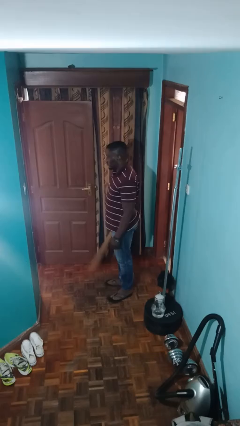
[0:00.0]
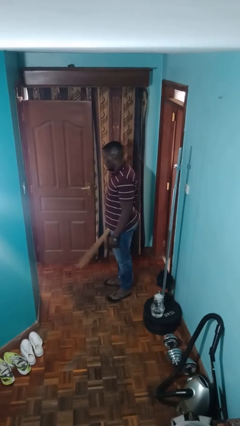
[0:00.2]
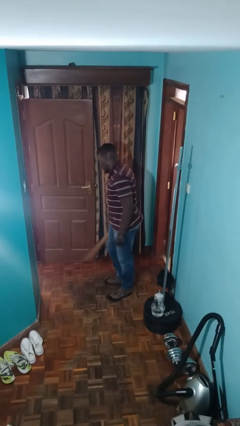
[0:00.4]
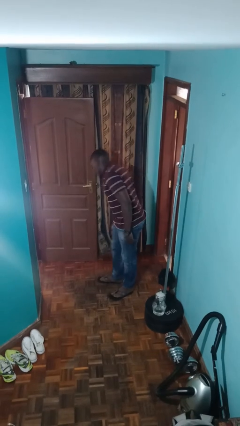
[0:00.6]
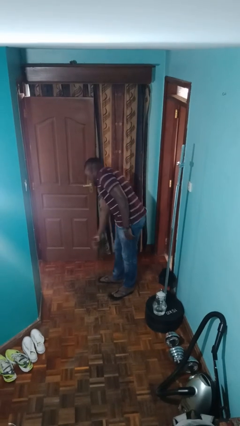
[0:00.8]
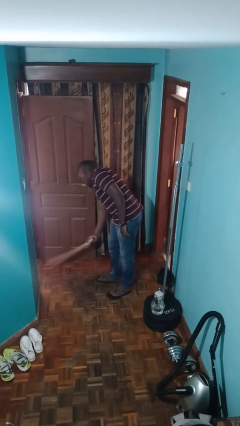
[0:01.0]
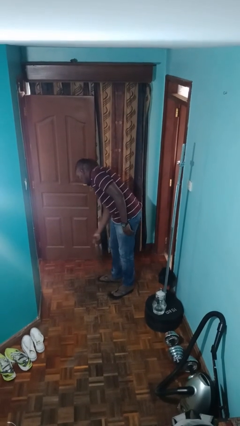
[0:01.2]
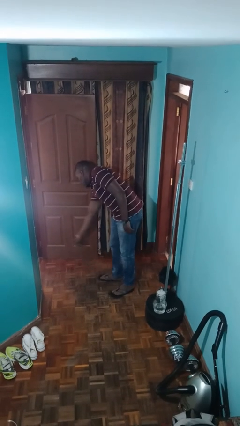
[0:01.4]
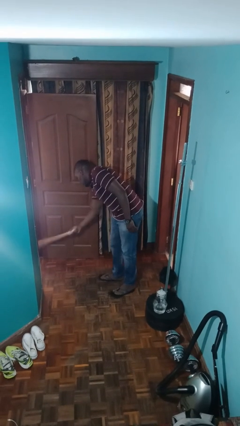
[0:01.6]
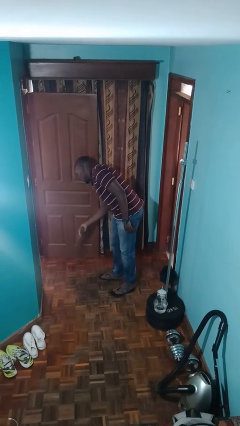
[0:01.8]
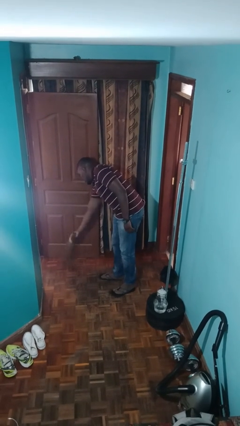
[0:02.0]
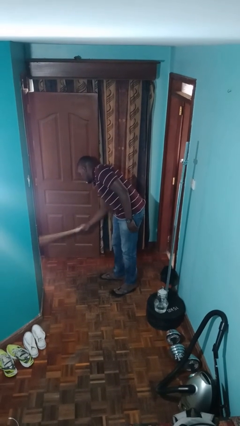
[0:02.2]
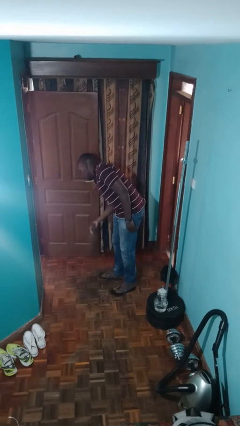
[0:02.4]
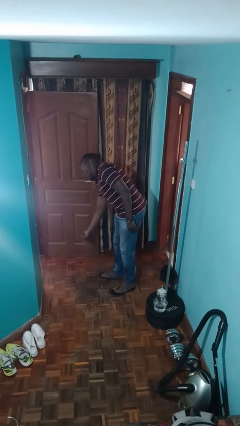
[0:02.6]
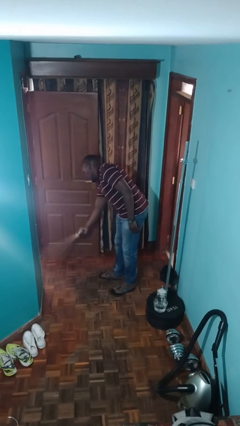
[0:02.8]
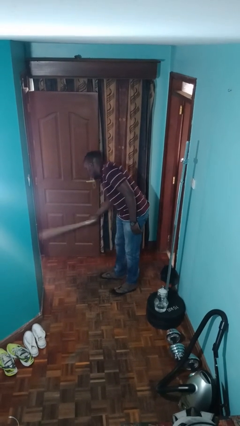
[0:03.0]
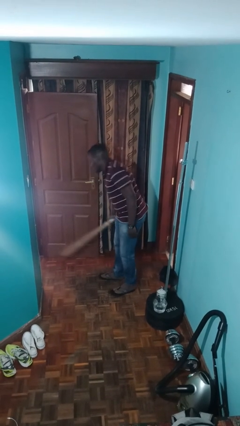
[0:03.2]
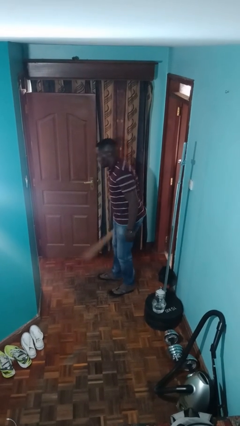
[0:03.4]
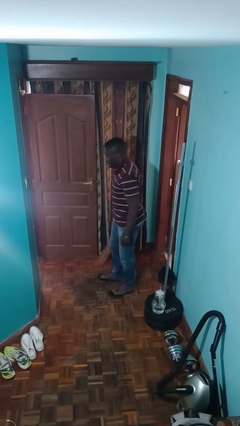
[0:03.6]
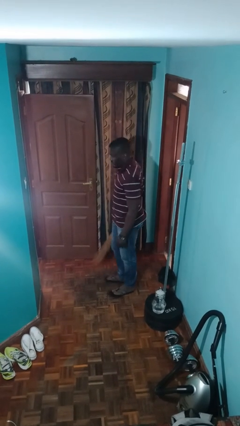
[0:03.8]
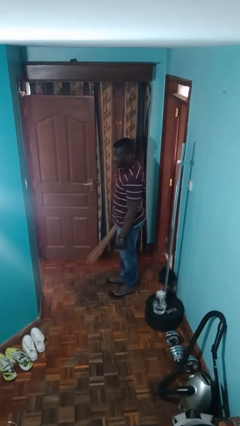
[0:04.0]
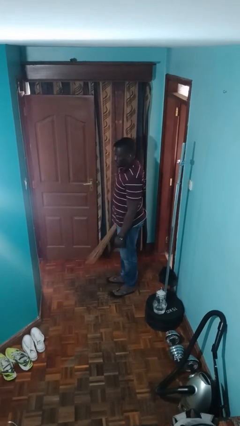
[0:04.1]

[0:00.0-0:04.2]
person sweeps floor

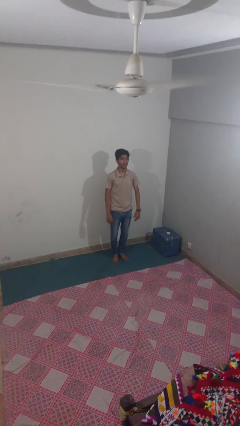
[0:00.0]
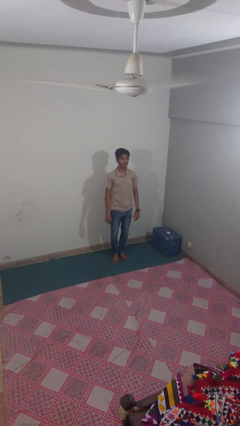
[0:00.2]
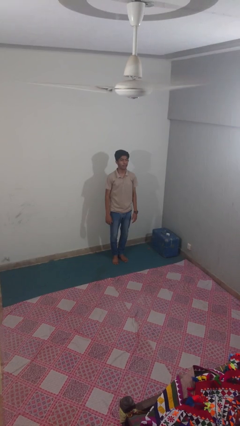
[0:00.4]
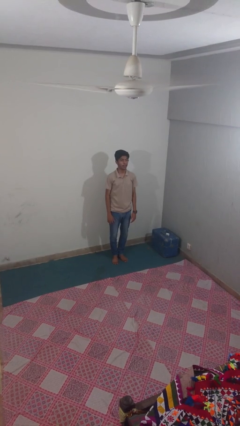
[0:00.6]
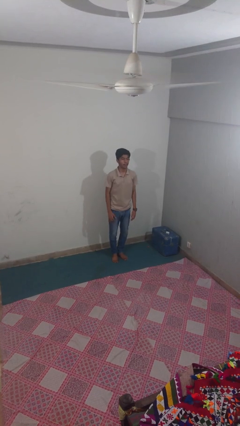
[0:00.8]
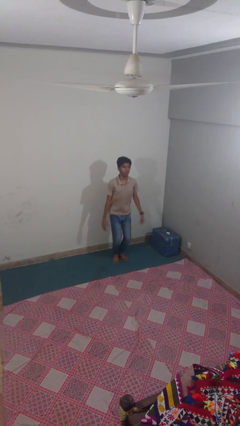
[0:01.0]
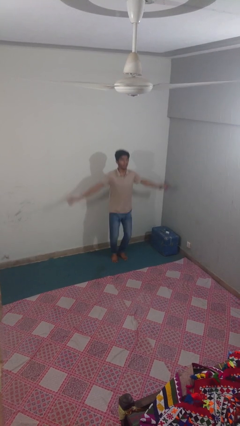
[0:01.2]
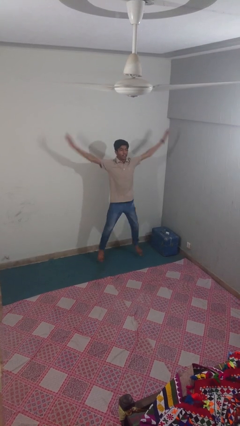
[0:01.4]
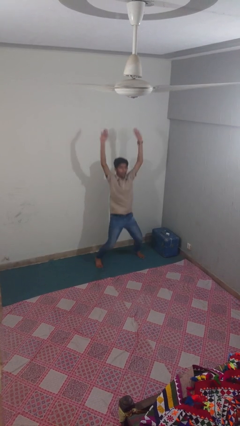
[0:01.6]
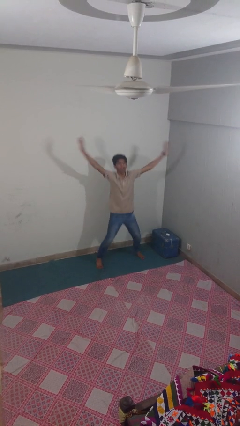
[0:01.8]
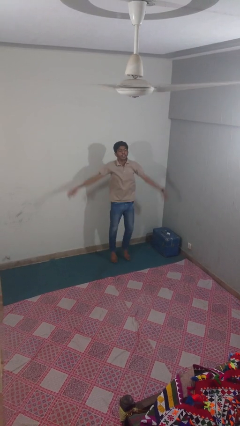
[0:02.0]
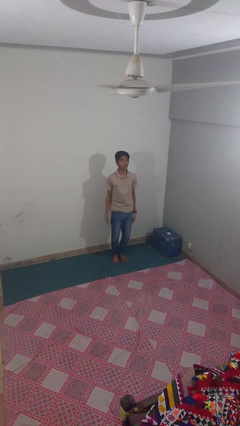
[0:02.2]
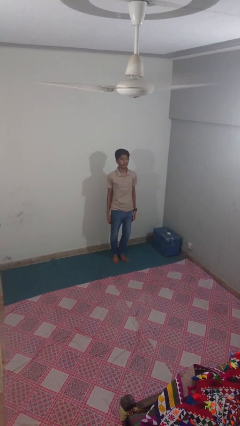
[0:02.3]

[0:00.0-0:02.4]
person exercises with jumping jacks

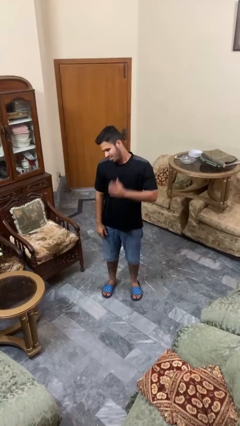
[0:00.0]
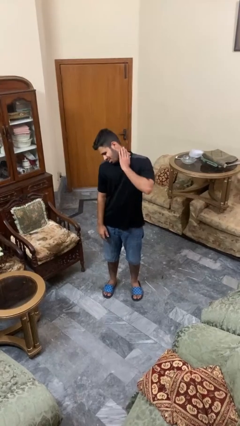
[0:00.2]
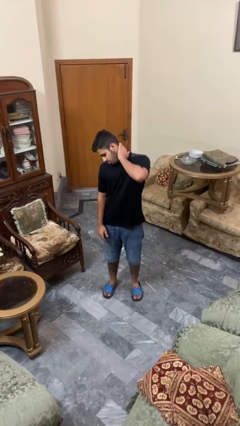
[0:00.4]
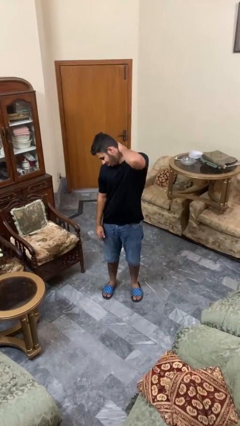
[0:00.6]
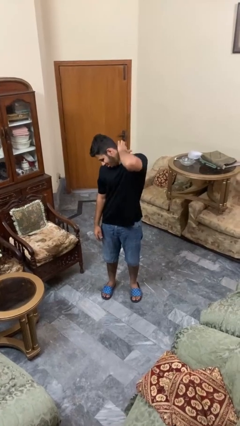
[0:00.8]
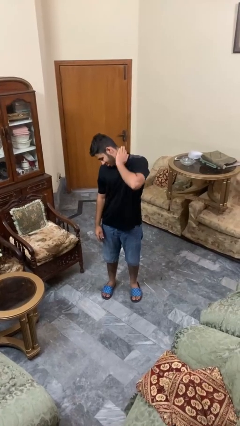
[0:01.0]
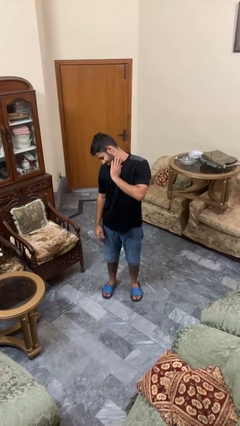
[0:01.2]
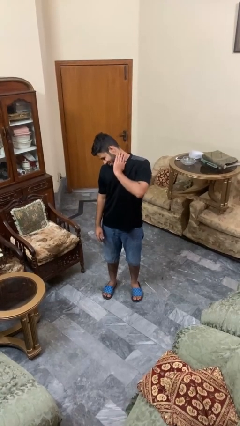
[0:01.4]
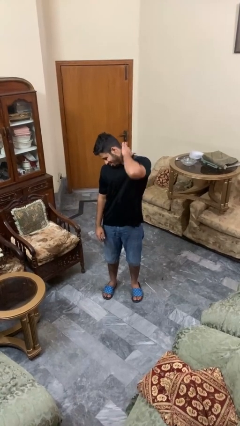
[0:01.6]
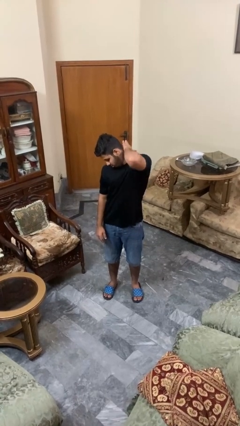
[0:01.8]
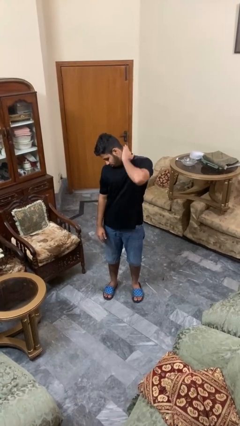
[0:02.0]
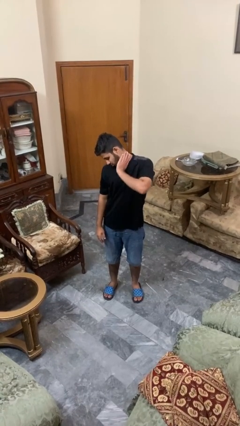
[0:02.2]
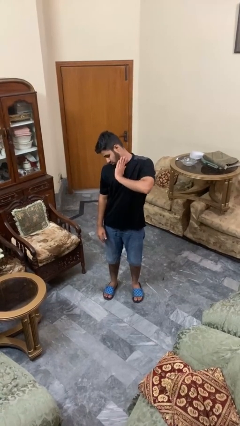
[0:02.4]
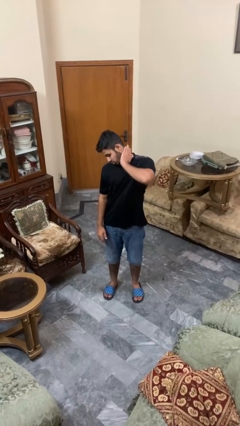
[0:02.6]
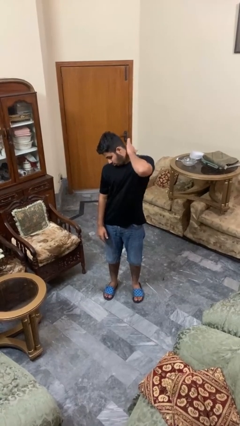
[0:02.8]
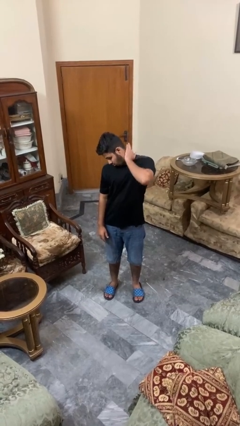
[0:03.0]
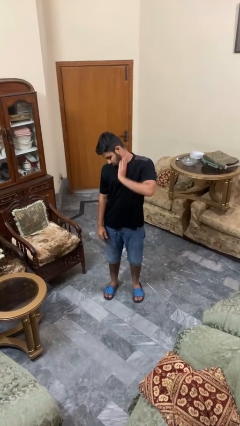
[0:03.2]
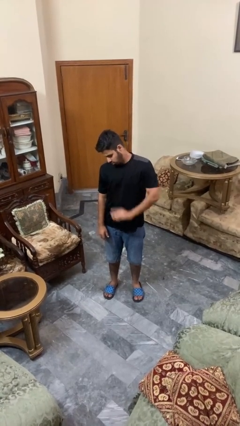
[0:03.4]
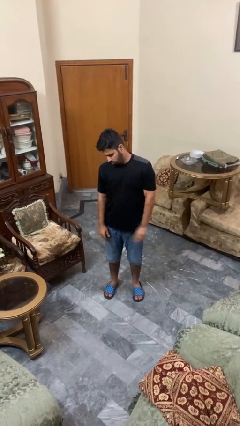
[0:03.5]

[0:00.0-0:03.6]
person rubs neck

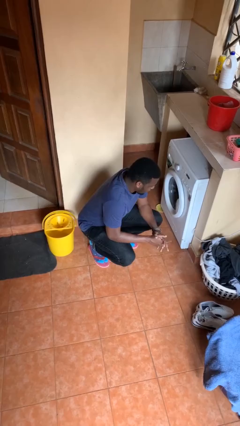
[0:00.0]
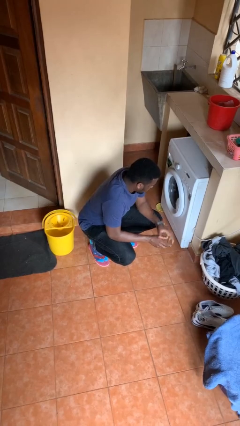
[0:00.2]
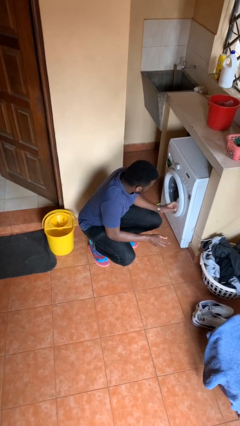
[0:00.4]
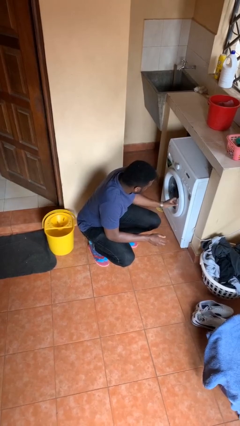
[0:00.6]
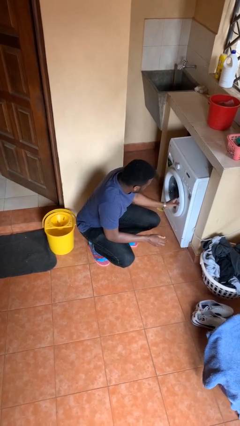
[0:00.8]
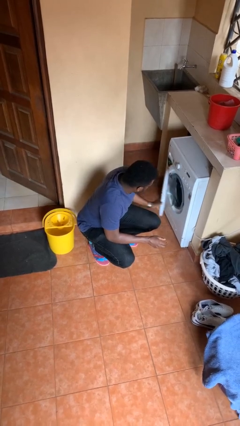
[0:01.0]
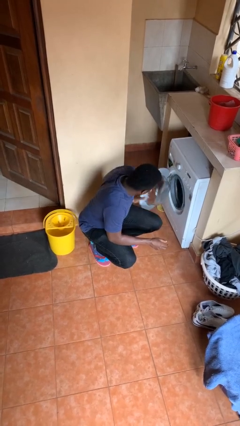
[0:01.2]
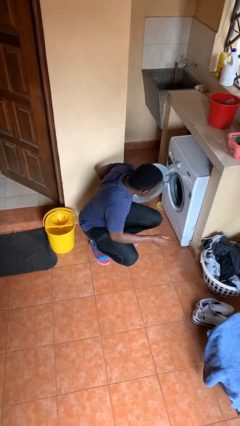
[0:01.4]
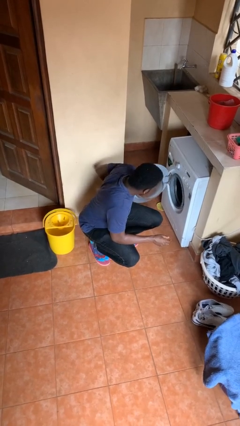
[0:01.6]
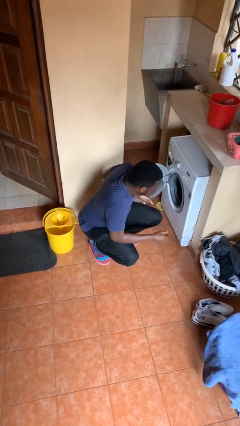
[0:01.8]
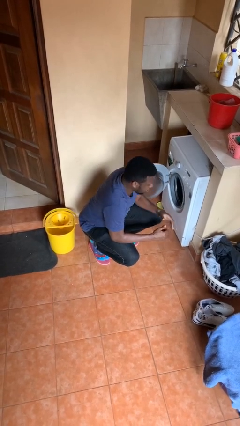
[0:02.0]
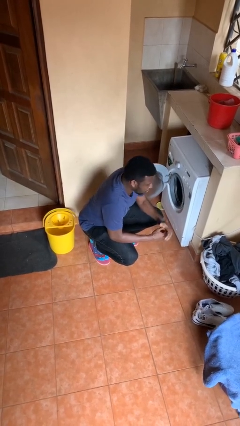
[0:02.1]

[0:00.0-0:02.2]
person opens clothes washer

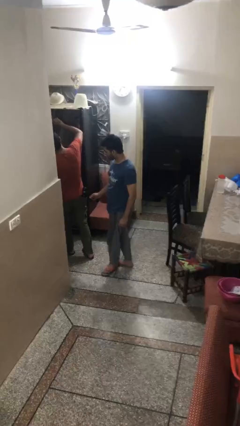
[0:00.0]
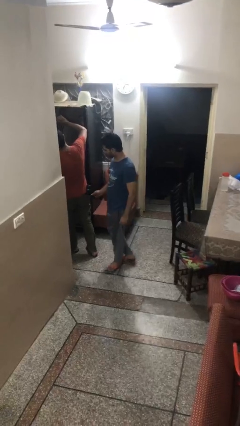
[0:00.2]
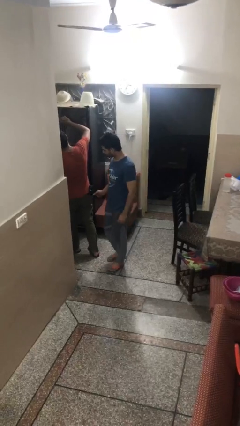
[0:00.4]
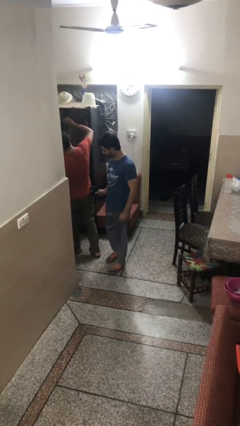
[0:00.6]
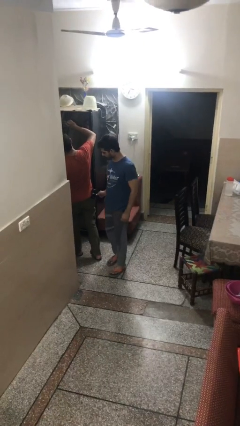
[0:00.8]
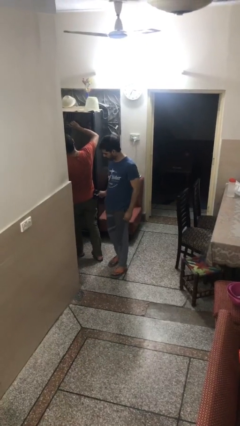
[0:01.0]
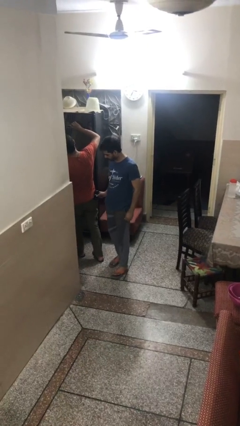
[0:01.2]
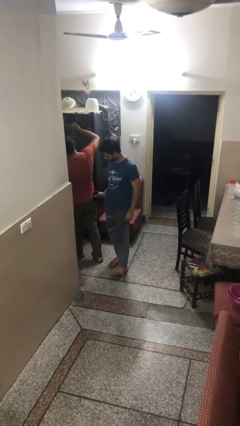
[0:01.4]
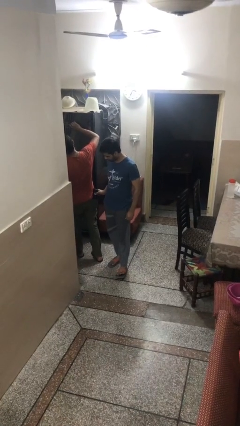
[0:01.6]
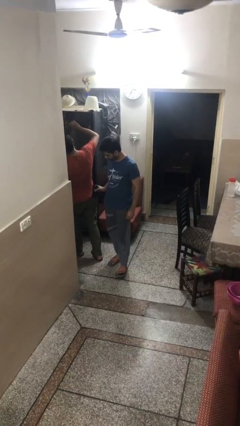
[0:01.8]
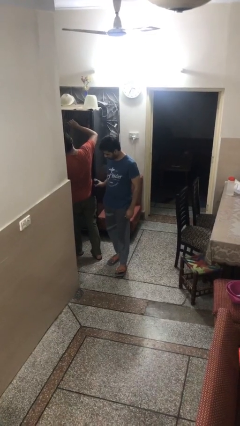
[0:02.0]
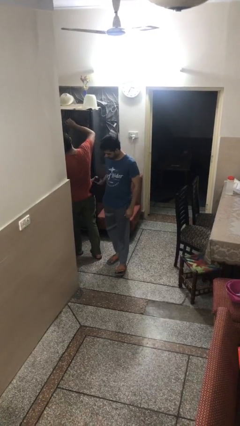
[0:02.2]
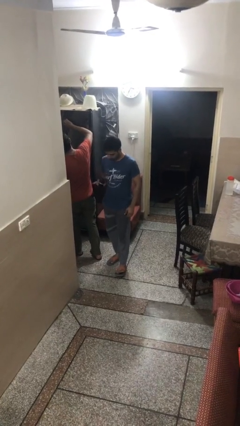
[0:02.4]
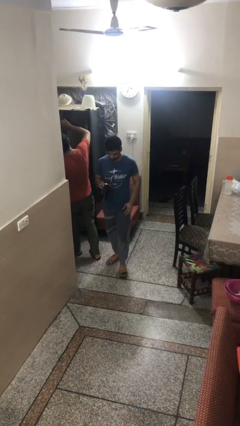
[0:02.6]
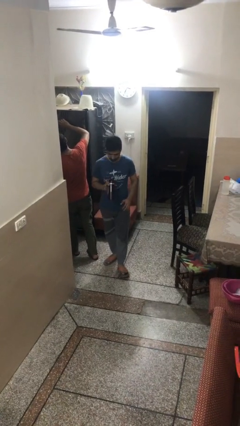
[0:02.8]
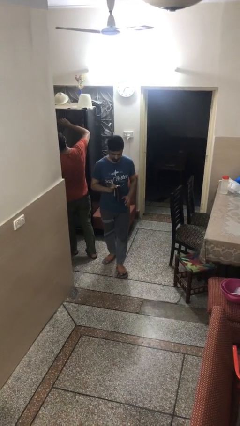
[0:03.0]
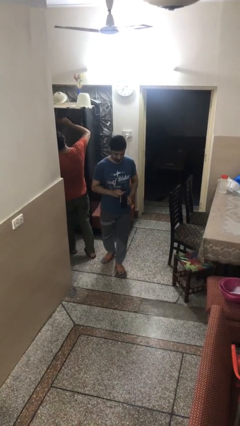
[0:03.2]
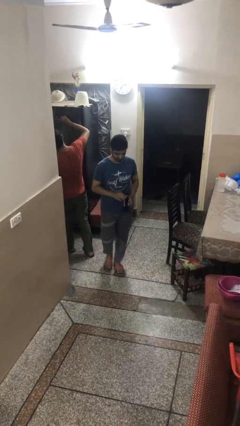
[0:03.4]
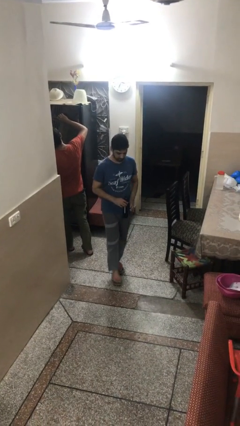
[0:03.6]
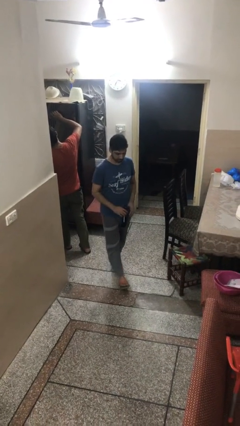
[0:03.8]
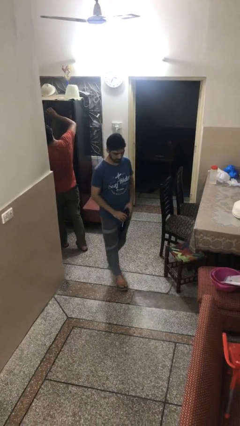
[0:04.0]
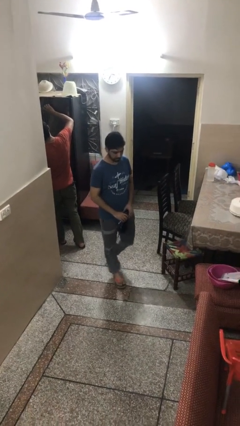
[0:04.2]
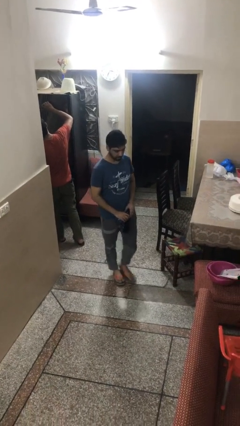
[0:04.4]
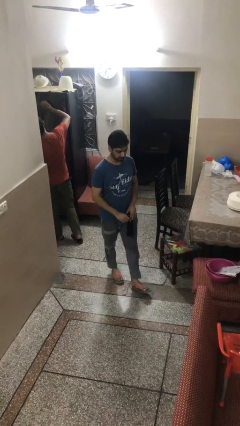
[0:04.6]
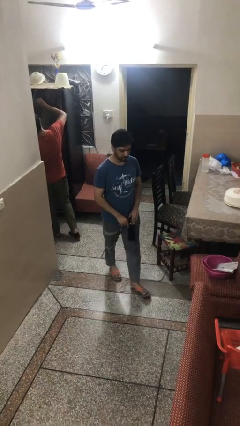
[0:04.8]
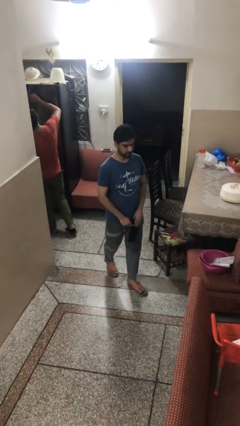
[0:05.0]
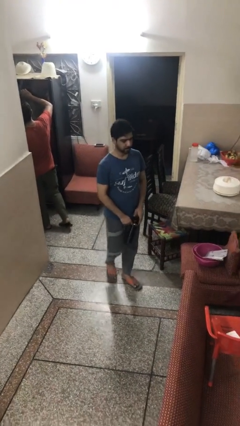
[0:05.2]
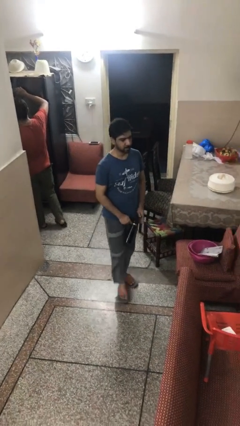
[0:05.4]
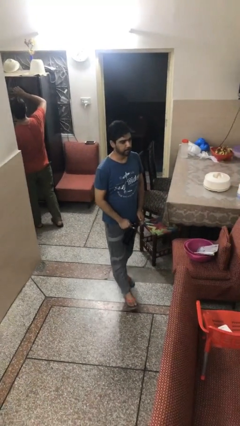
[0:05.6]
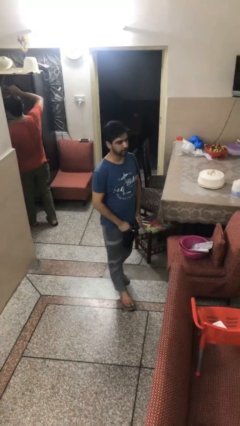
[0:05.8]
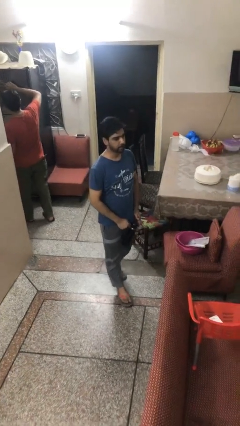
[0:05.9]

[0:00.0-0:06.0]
person steals object from person
